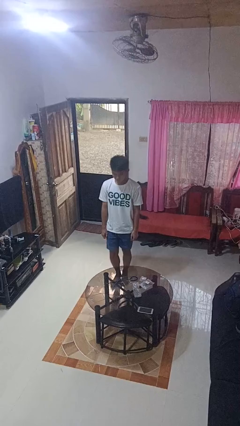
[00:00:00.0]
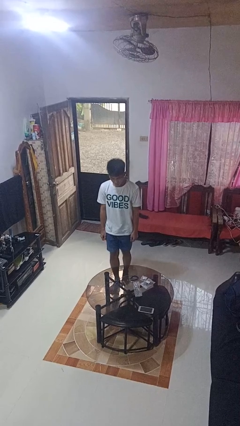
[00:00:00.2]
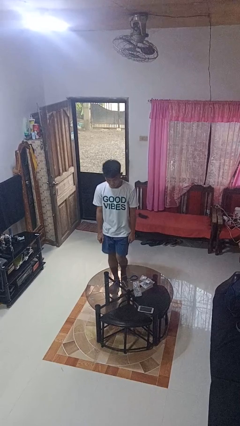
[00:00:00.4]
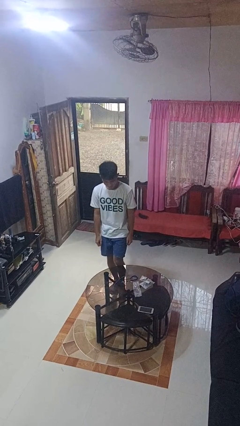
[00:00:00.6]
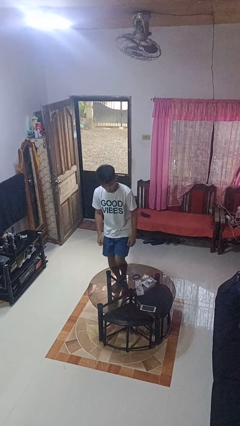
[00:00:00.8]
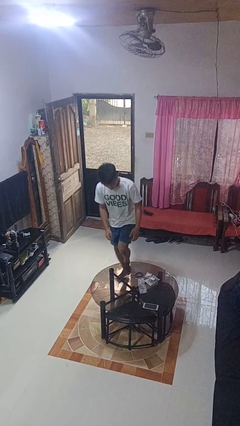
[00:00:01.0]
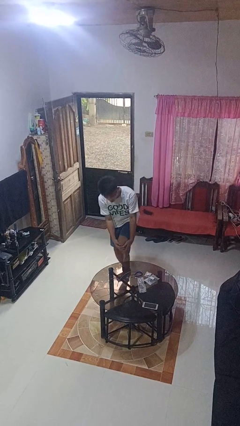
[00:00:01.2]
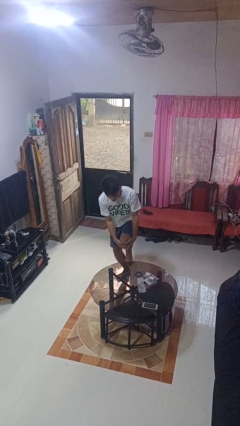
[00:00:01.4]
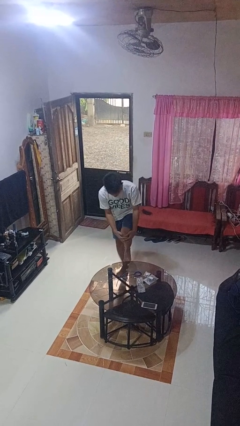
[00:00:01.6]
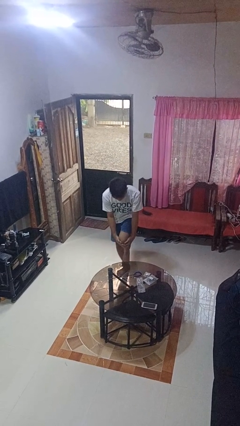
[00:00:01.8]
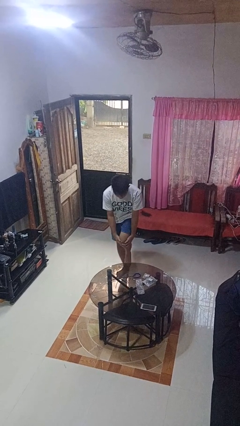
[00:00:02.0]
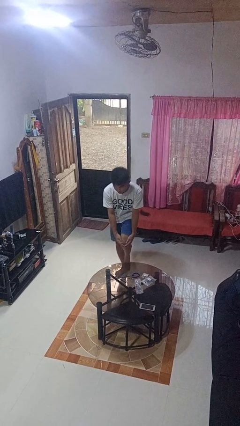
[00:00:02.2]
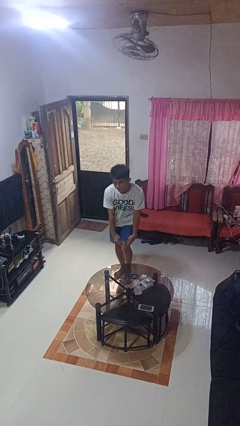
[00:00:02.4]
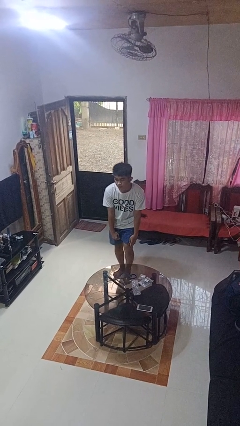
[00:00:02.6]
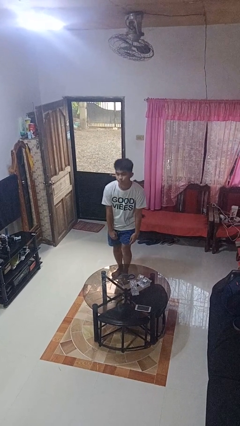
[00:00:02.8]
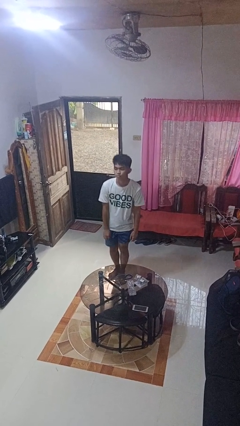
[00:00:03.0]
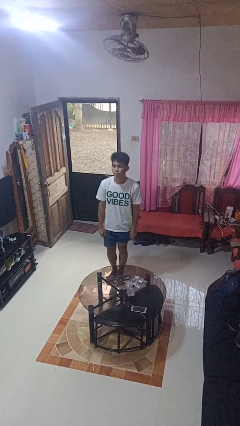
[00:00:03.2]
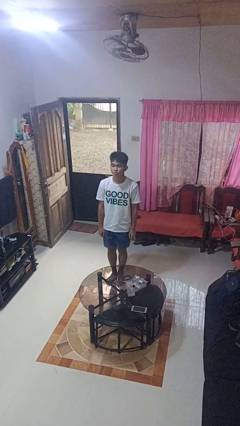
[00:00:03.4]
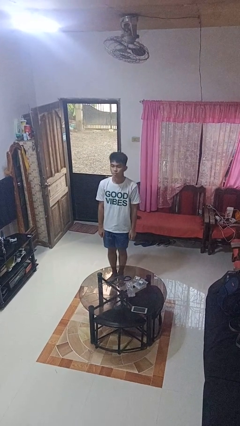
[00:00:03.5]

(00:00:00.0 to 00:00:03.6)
person bumps into table

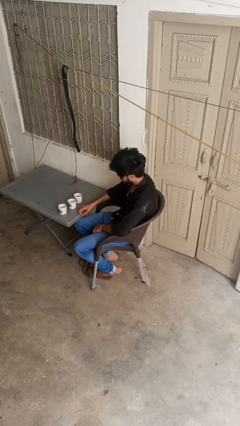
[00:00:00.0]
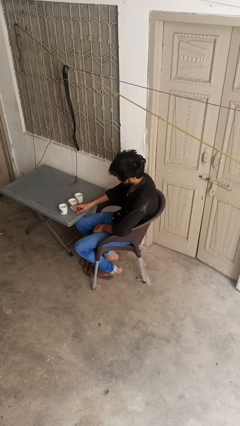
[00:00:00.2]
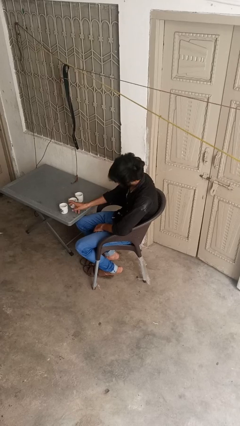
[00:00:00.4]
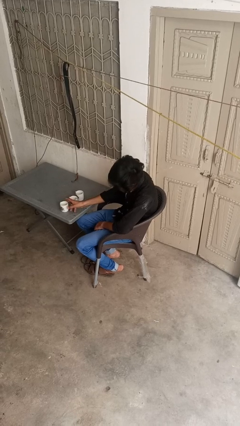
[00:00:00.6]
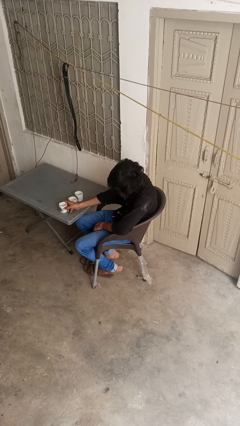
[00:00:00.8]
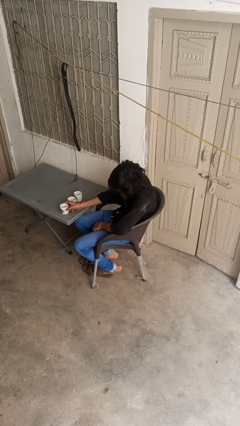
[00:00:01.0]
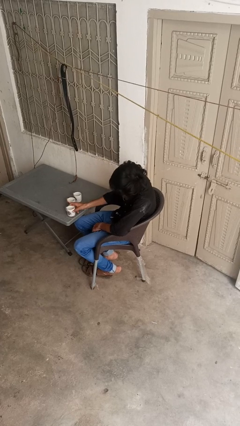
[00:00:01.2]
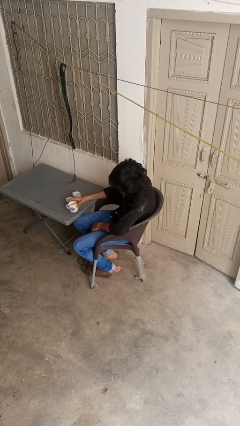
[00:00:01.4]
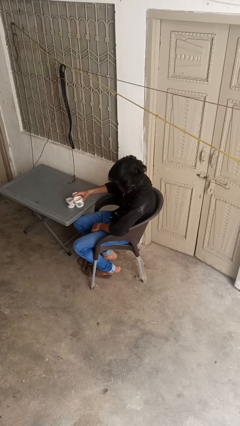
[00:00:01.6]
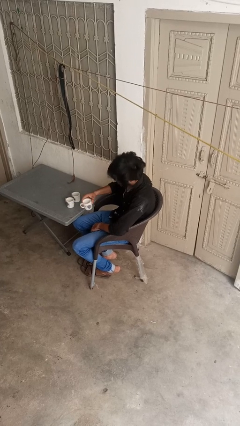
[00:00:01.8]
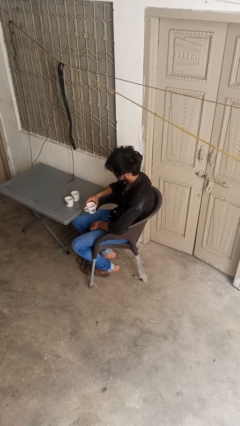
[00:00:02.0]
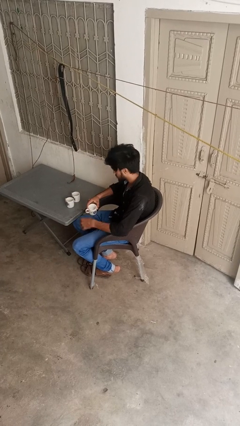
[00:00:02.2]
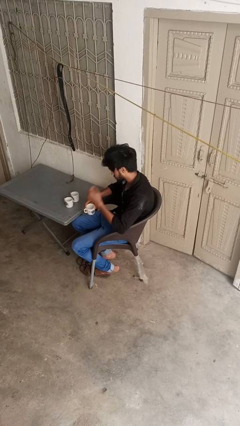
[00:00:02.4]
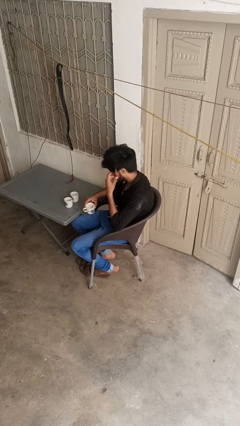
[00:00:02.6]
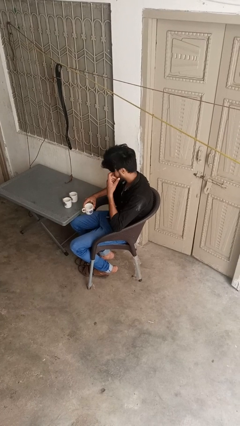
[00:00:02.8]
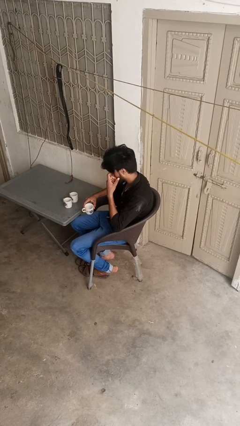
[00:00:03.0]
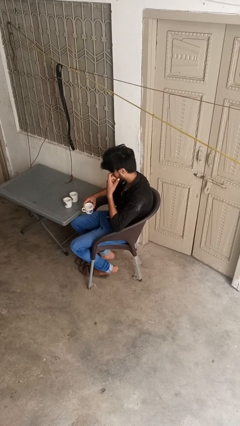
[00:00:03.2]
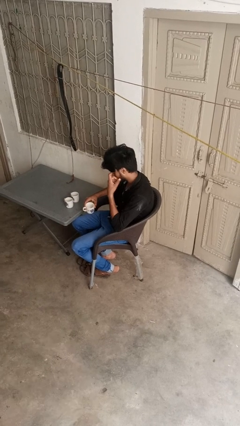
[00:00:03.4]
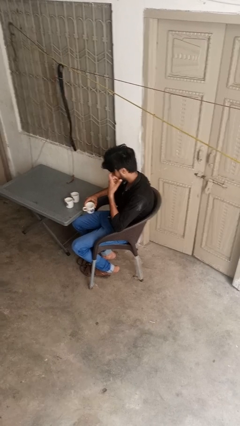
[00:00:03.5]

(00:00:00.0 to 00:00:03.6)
person picks up object from table

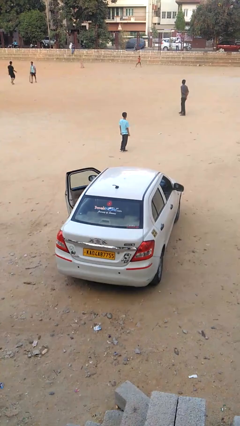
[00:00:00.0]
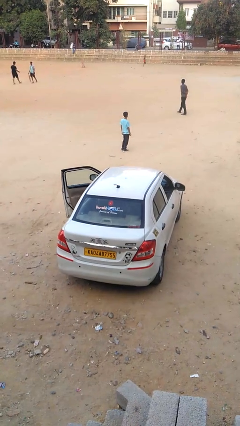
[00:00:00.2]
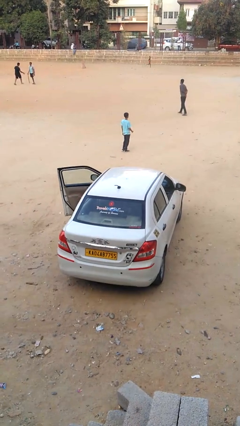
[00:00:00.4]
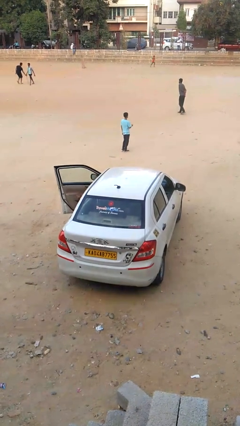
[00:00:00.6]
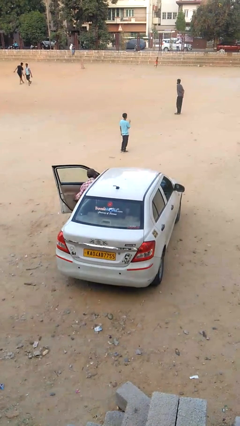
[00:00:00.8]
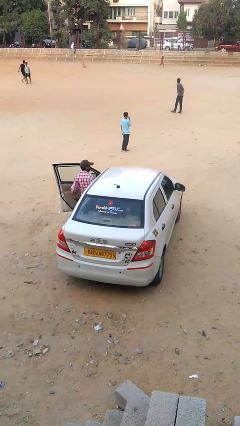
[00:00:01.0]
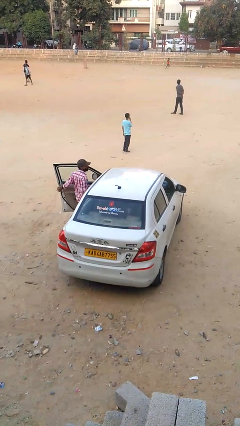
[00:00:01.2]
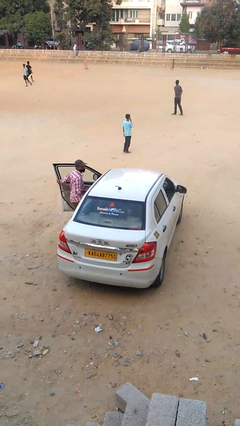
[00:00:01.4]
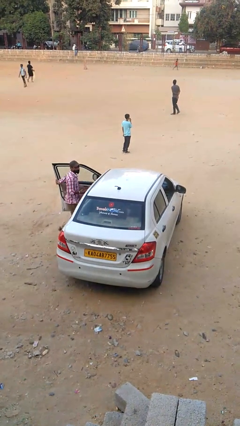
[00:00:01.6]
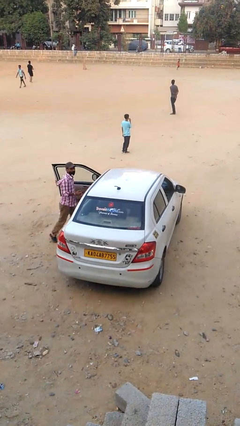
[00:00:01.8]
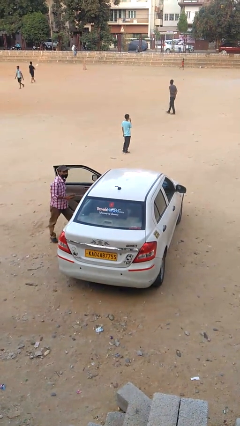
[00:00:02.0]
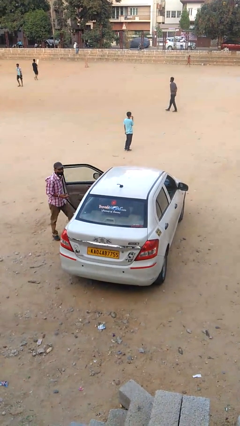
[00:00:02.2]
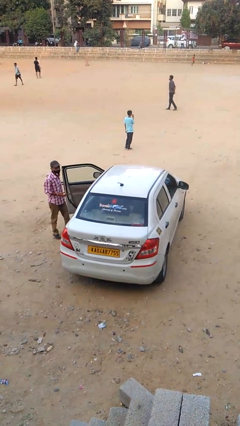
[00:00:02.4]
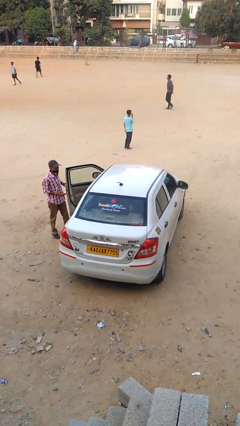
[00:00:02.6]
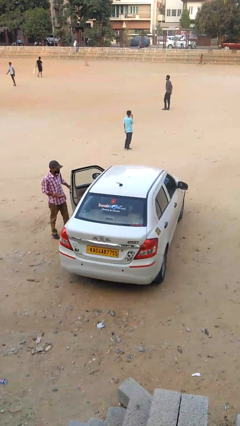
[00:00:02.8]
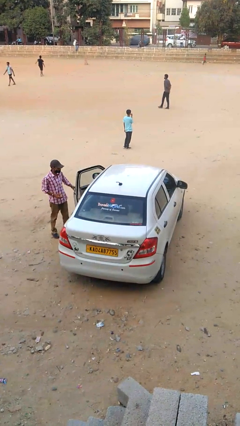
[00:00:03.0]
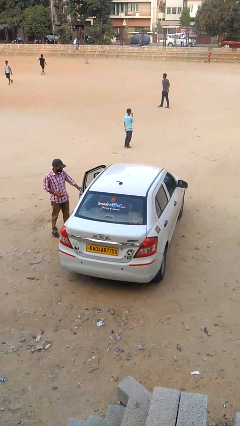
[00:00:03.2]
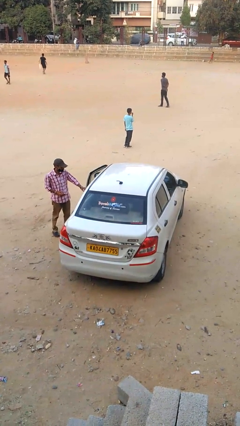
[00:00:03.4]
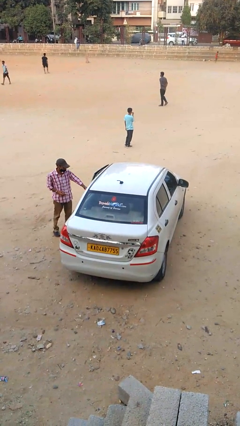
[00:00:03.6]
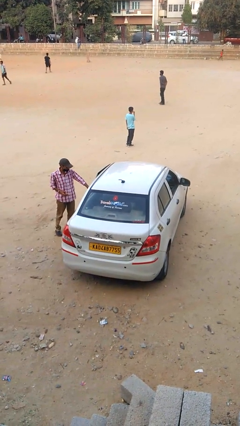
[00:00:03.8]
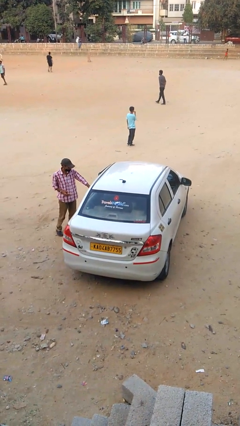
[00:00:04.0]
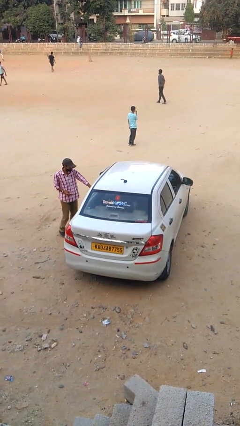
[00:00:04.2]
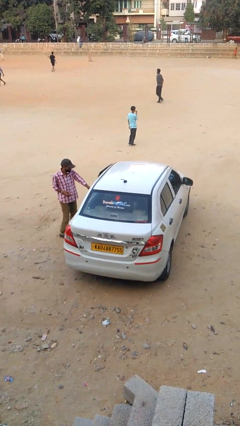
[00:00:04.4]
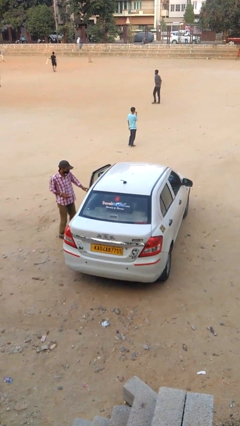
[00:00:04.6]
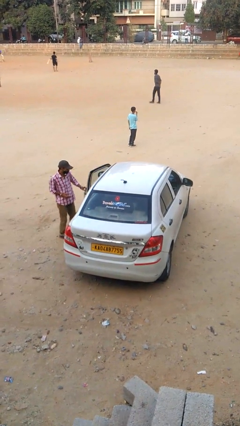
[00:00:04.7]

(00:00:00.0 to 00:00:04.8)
car drops off person

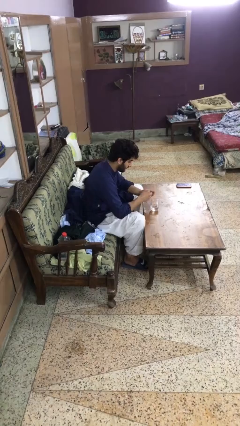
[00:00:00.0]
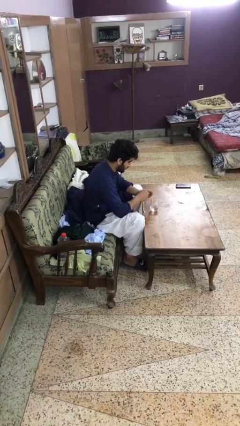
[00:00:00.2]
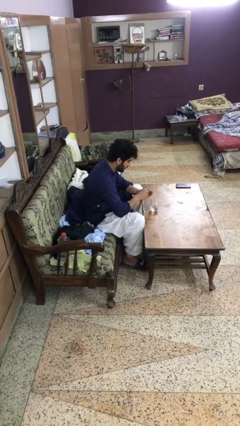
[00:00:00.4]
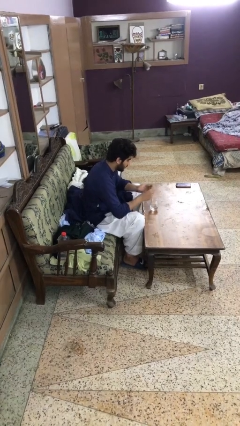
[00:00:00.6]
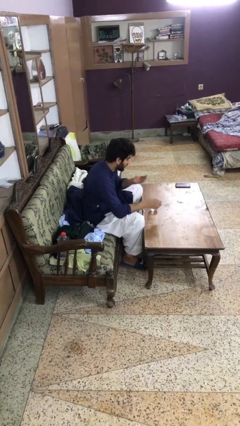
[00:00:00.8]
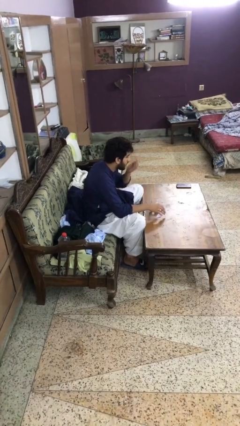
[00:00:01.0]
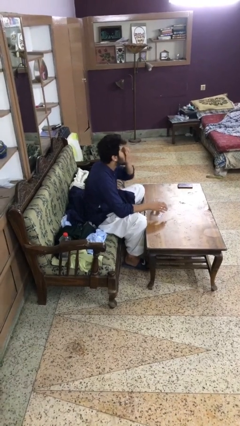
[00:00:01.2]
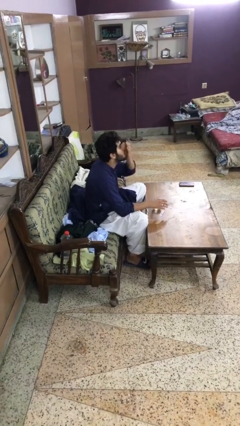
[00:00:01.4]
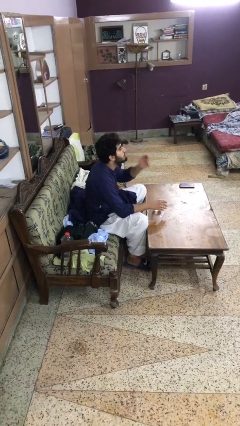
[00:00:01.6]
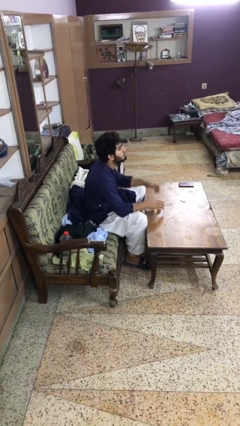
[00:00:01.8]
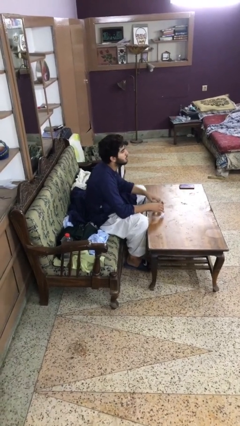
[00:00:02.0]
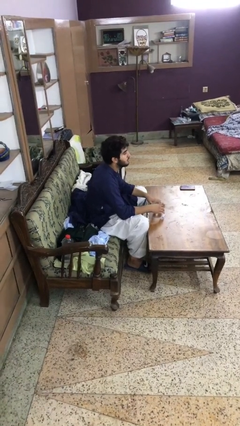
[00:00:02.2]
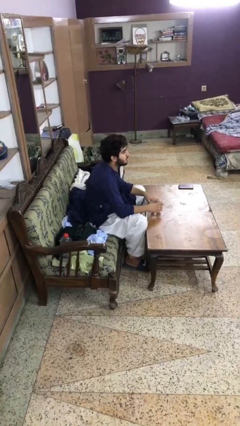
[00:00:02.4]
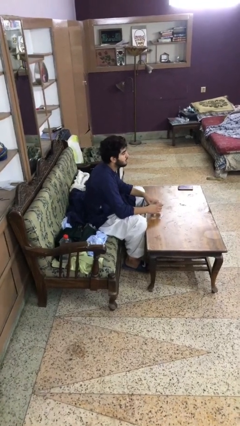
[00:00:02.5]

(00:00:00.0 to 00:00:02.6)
person takes medicine pills

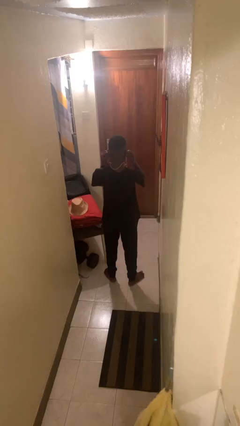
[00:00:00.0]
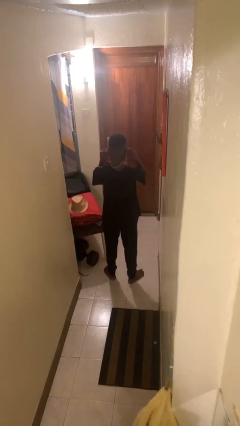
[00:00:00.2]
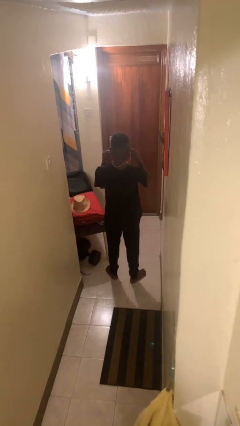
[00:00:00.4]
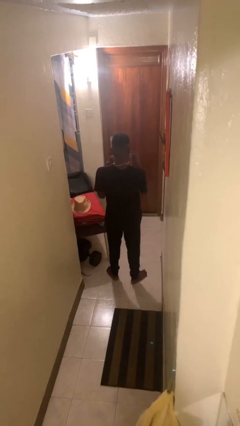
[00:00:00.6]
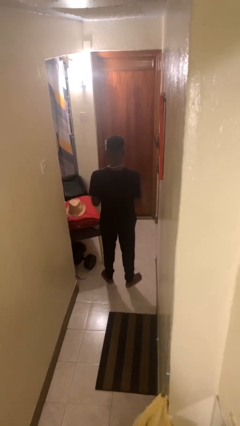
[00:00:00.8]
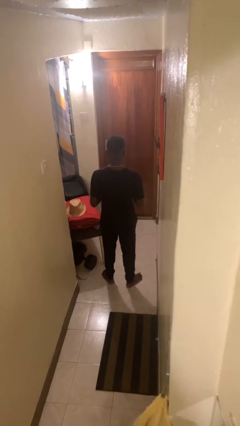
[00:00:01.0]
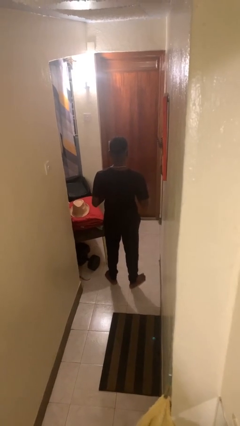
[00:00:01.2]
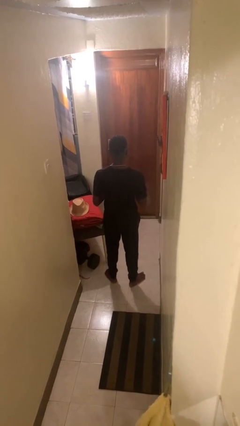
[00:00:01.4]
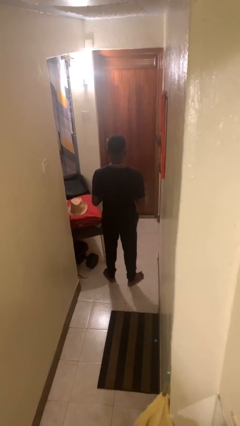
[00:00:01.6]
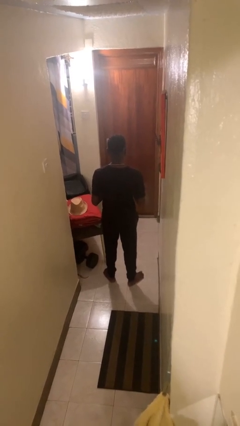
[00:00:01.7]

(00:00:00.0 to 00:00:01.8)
person takes off headphones

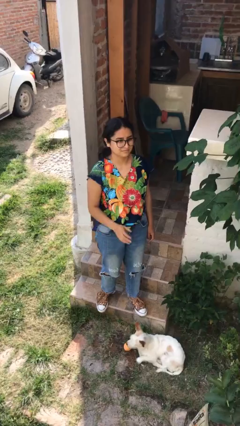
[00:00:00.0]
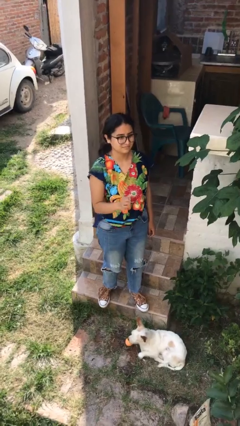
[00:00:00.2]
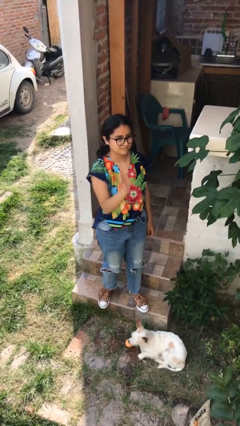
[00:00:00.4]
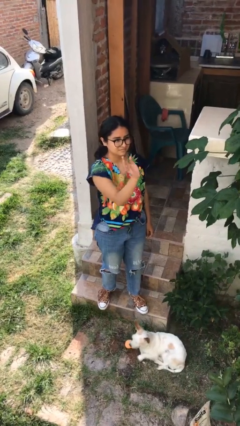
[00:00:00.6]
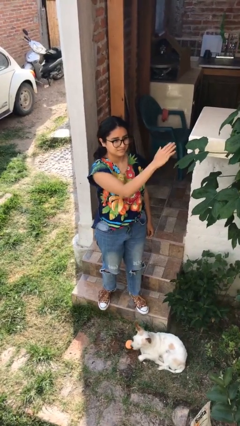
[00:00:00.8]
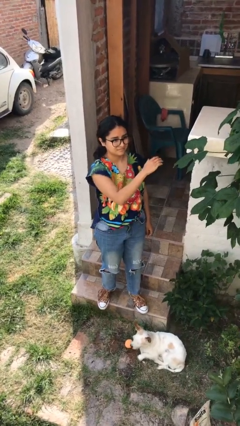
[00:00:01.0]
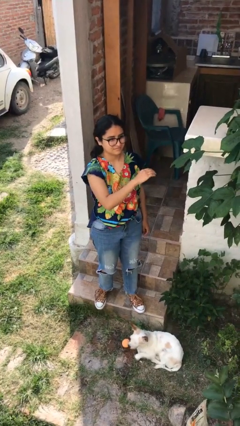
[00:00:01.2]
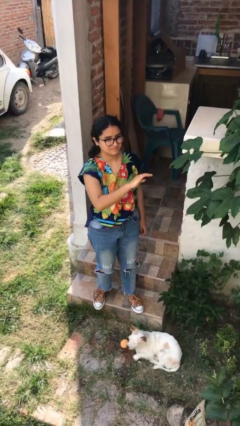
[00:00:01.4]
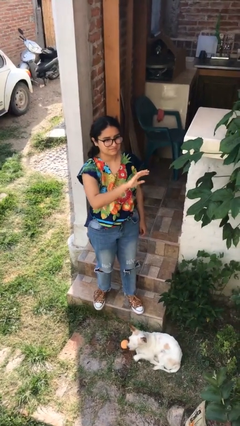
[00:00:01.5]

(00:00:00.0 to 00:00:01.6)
person gestures swipe left
